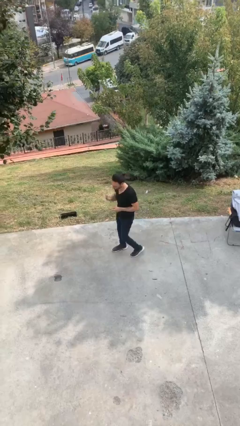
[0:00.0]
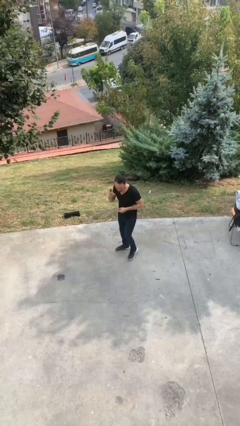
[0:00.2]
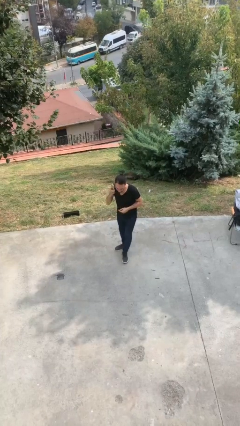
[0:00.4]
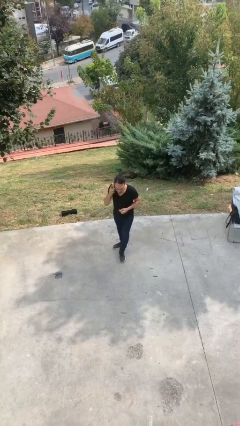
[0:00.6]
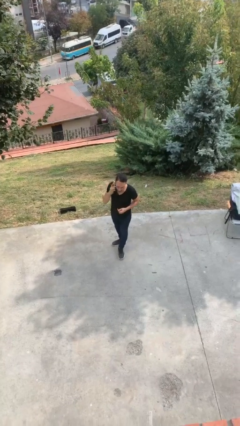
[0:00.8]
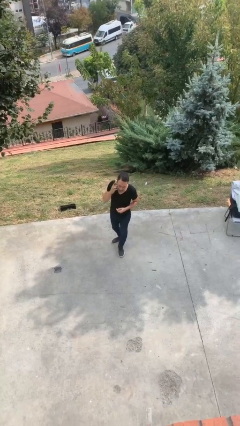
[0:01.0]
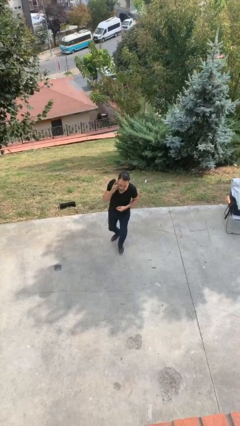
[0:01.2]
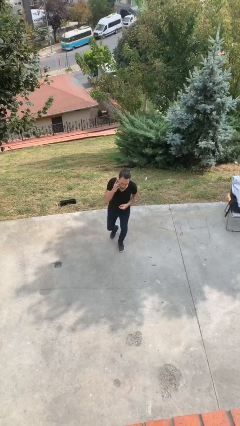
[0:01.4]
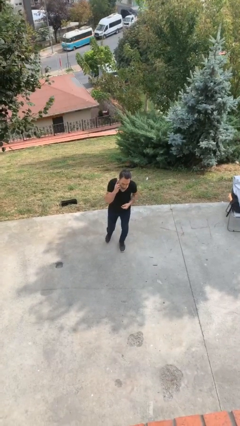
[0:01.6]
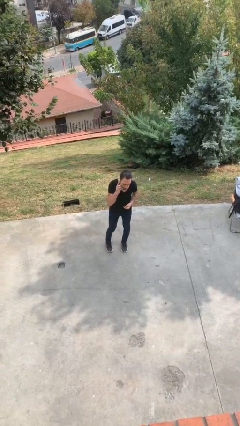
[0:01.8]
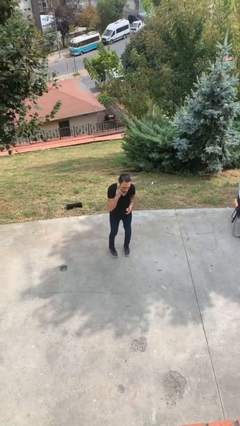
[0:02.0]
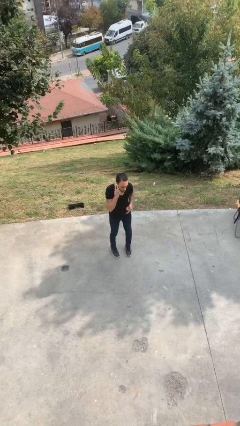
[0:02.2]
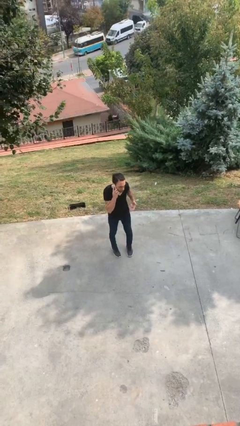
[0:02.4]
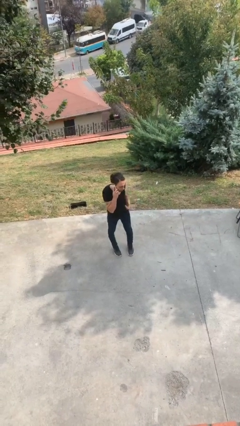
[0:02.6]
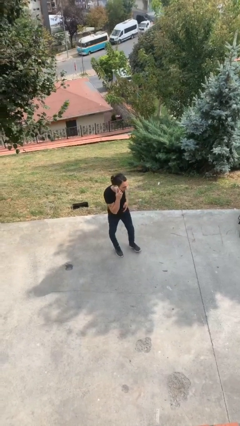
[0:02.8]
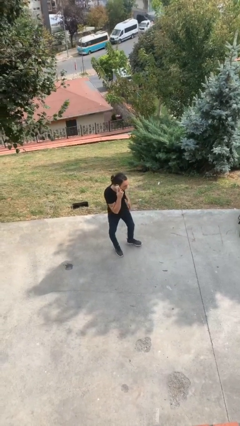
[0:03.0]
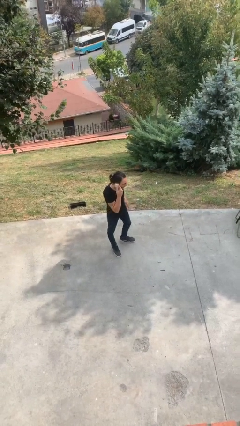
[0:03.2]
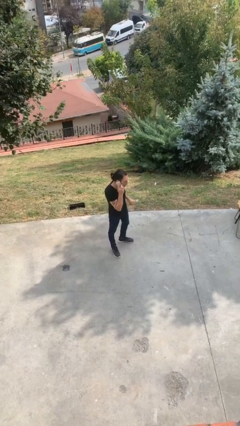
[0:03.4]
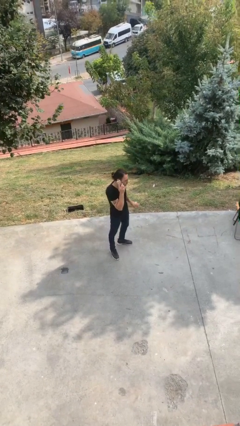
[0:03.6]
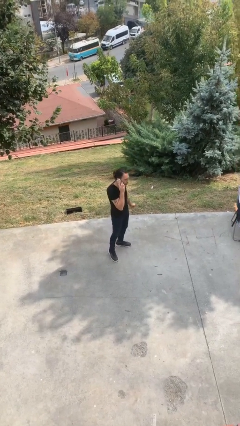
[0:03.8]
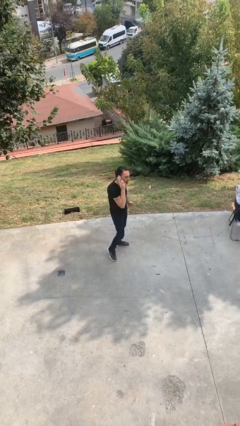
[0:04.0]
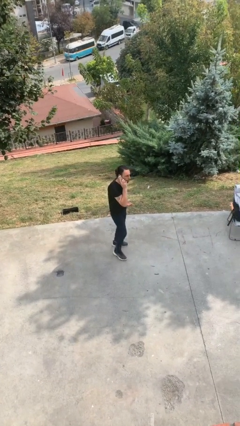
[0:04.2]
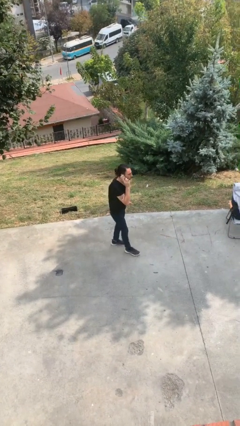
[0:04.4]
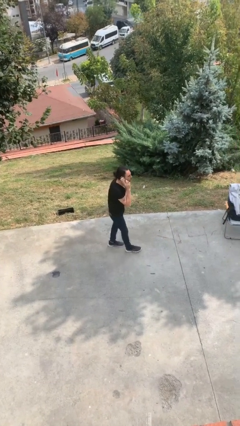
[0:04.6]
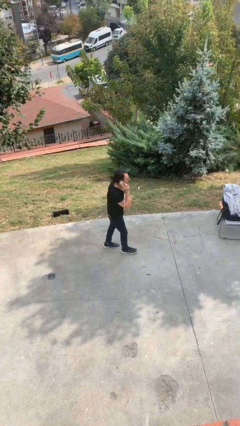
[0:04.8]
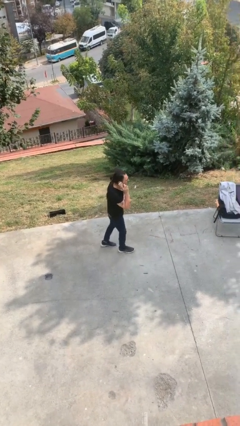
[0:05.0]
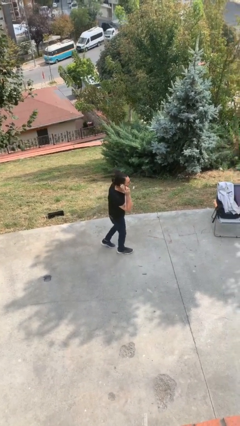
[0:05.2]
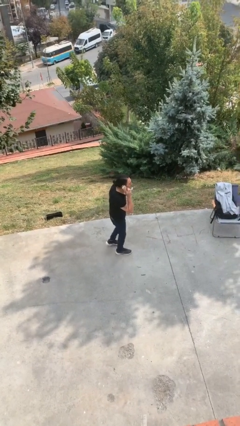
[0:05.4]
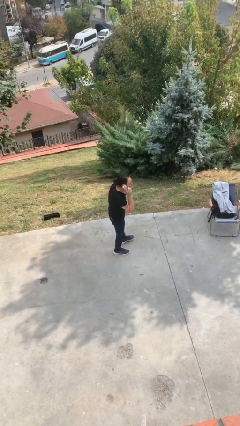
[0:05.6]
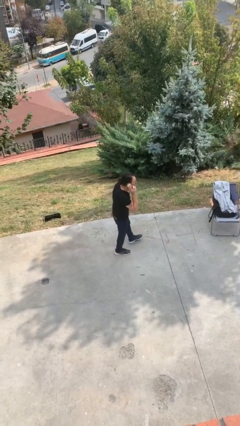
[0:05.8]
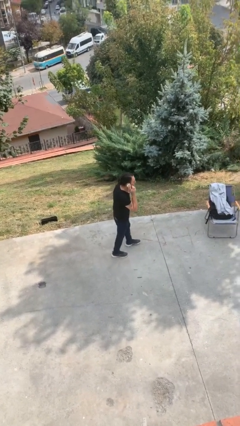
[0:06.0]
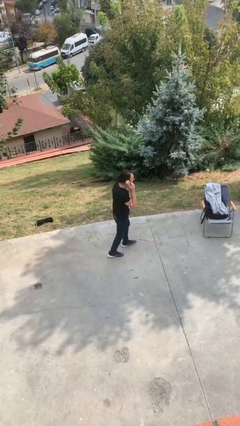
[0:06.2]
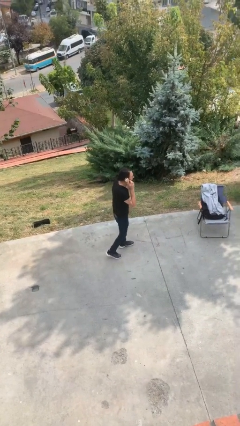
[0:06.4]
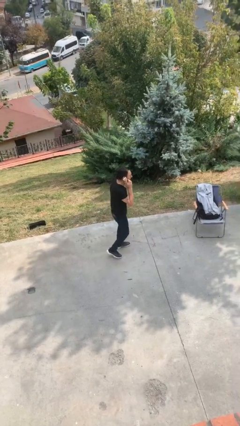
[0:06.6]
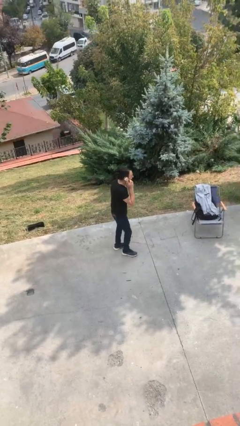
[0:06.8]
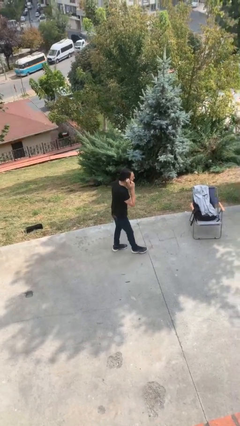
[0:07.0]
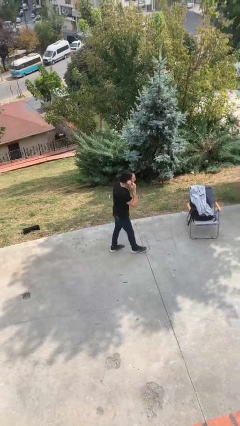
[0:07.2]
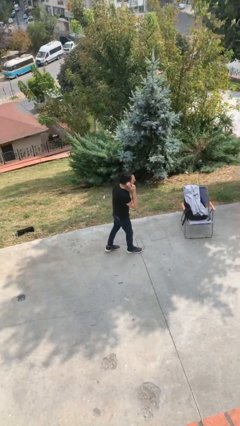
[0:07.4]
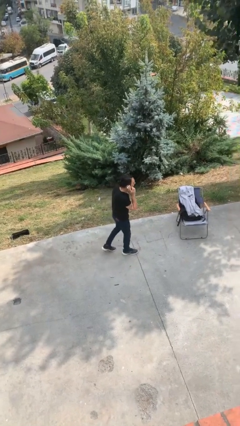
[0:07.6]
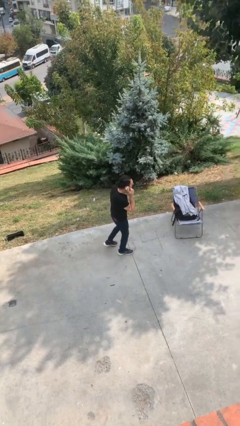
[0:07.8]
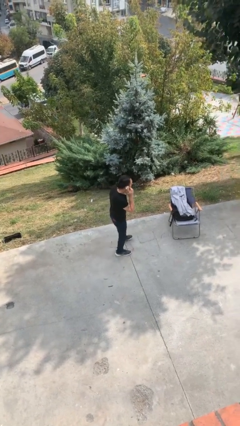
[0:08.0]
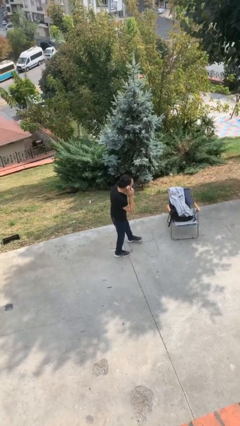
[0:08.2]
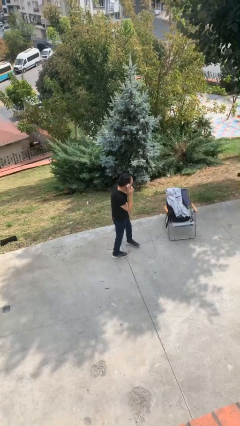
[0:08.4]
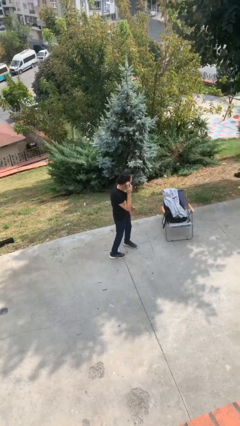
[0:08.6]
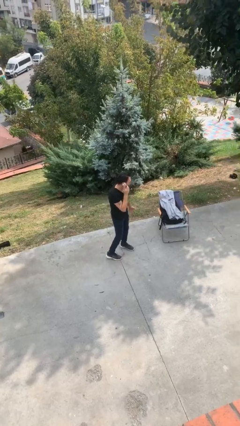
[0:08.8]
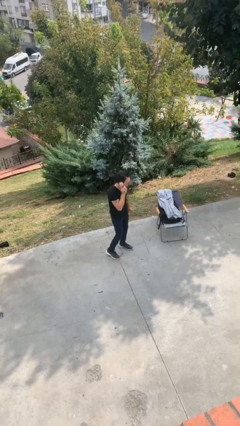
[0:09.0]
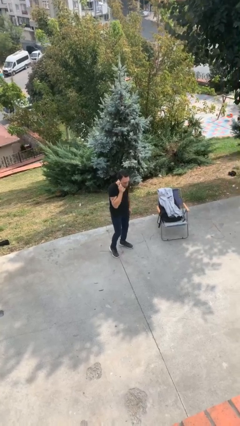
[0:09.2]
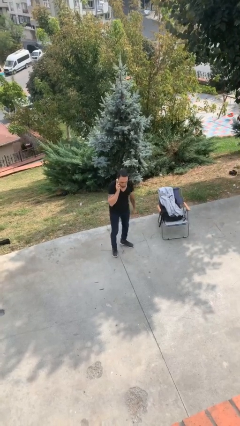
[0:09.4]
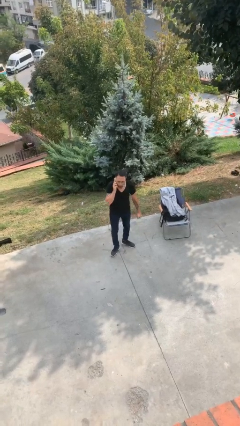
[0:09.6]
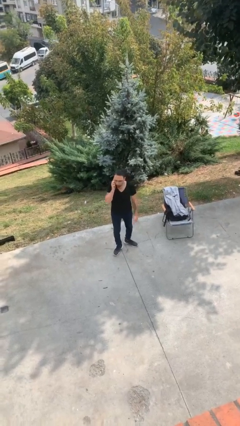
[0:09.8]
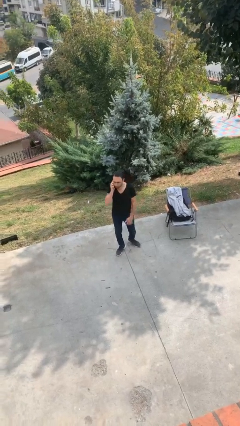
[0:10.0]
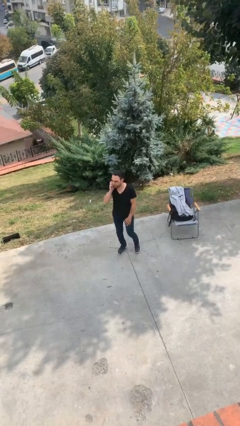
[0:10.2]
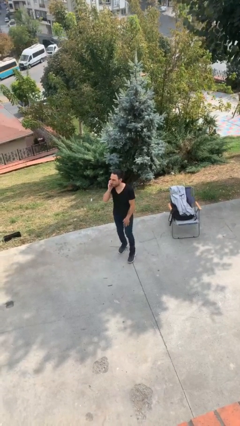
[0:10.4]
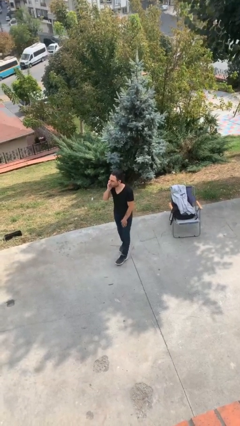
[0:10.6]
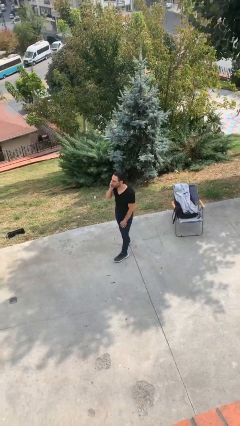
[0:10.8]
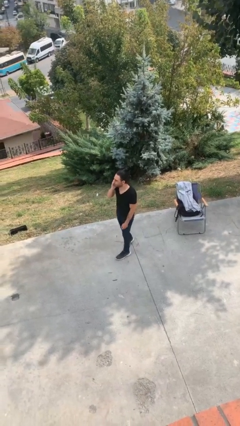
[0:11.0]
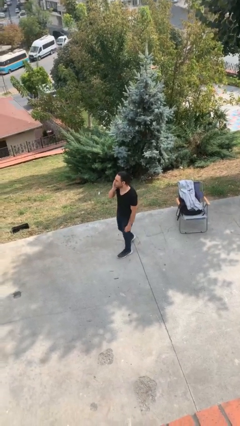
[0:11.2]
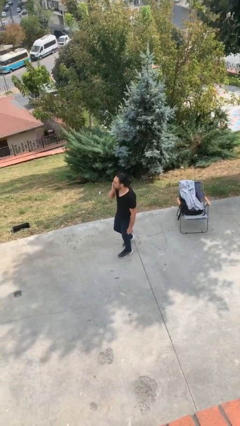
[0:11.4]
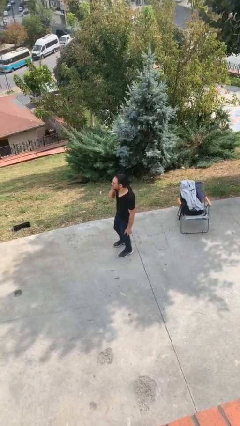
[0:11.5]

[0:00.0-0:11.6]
person talks on phone

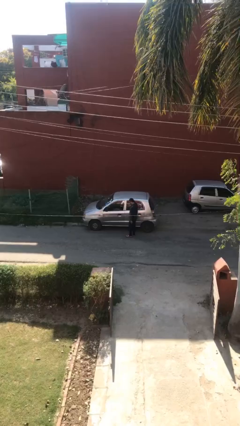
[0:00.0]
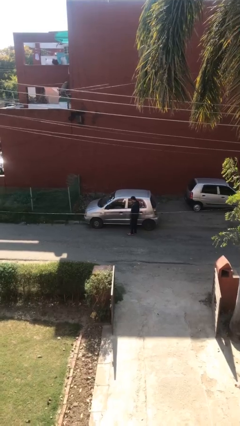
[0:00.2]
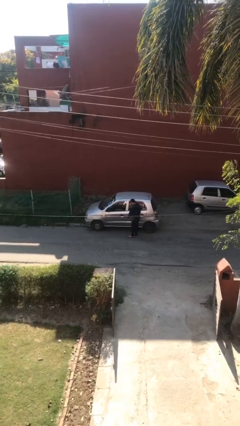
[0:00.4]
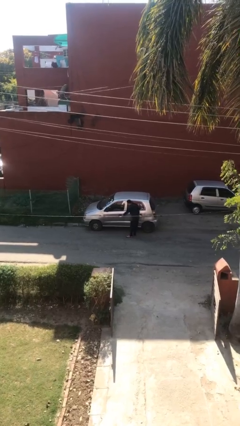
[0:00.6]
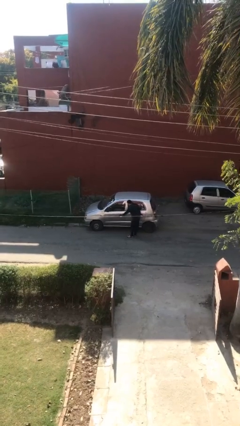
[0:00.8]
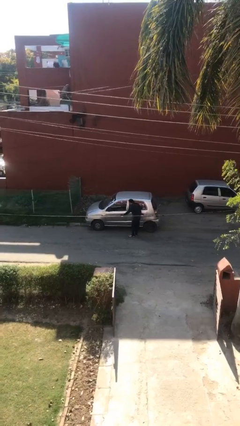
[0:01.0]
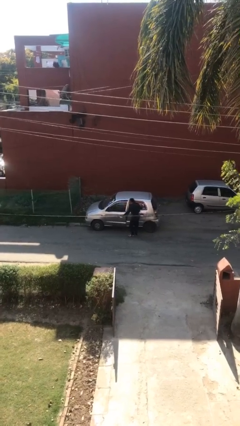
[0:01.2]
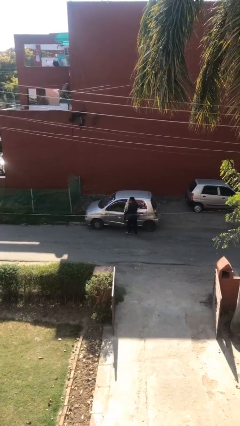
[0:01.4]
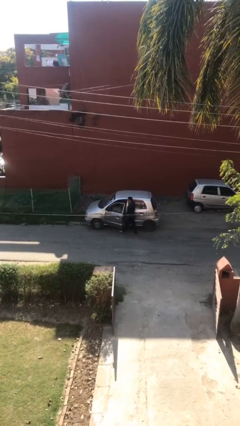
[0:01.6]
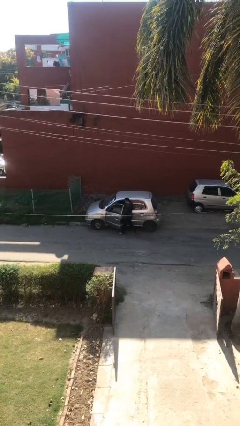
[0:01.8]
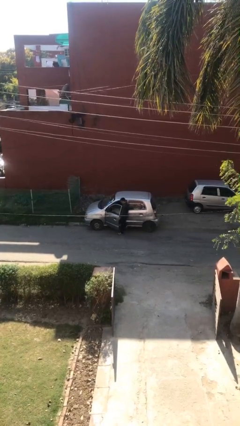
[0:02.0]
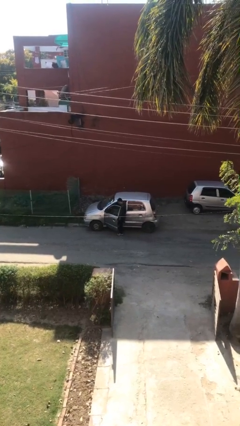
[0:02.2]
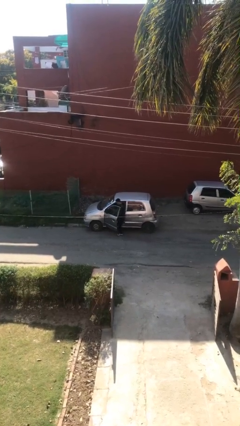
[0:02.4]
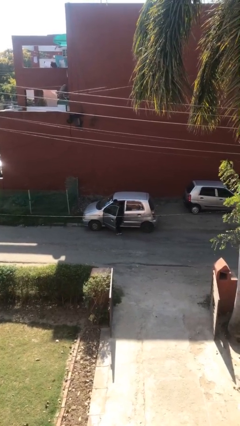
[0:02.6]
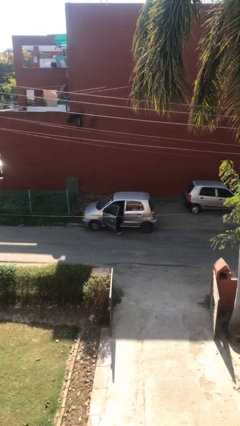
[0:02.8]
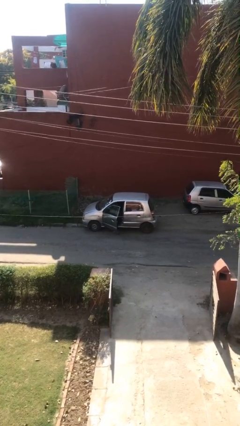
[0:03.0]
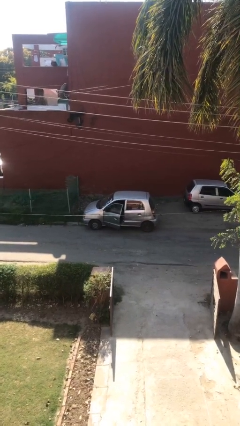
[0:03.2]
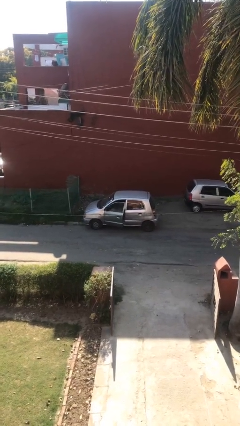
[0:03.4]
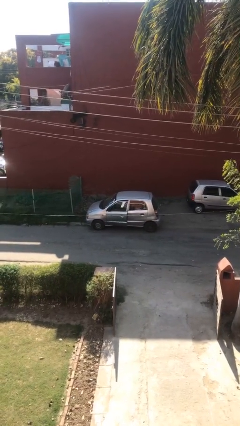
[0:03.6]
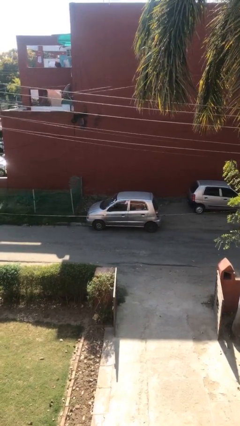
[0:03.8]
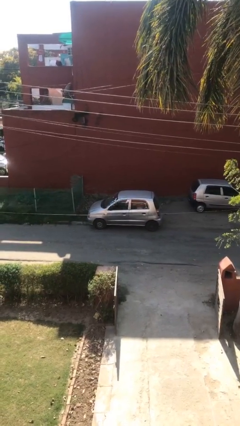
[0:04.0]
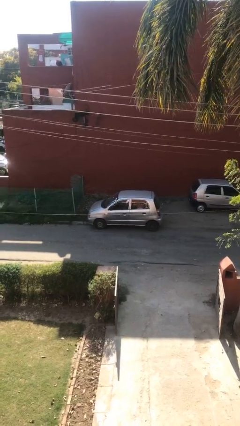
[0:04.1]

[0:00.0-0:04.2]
car picks up person

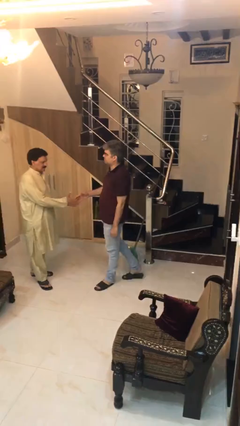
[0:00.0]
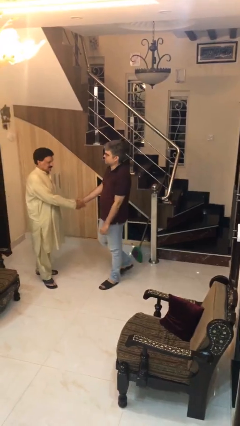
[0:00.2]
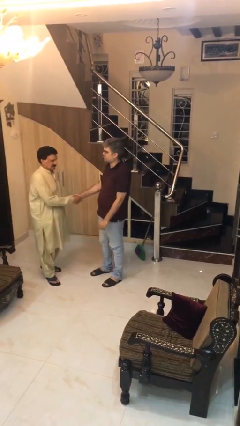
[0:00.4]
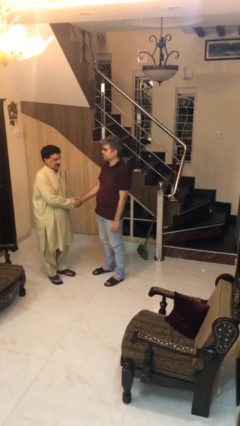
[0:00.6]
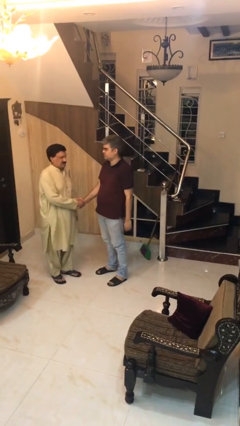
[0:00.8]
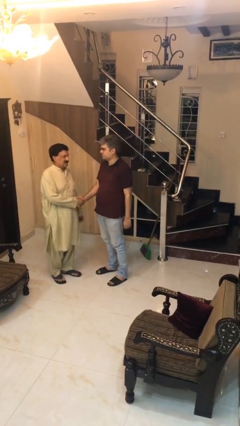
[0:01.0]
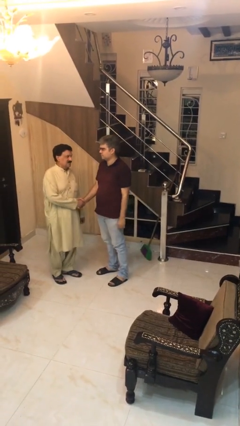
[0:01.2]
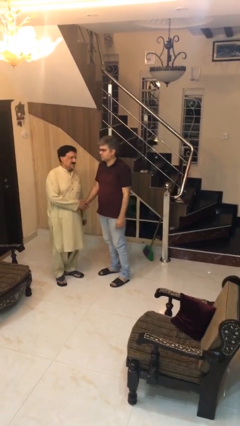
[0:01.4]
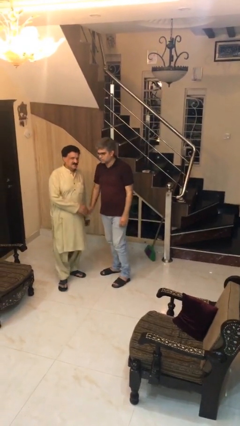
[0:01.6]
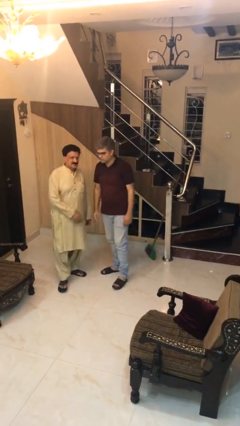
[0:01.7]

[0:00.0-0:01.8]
person shakes hand

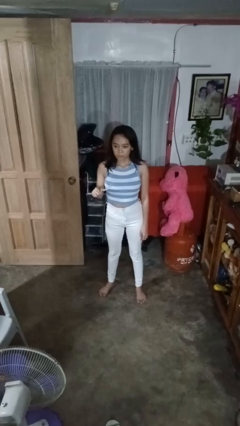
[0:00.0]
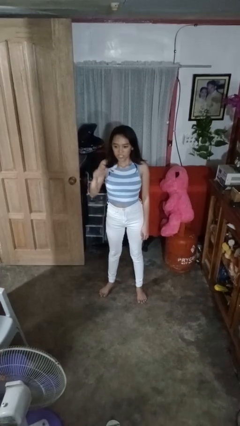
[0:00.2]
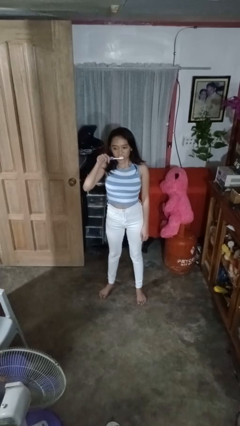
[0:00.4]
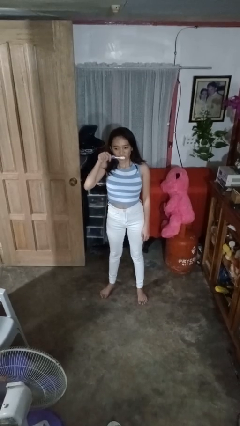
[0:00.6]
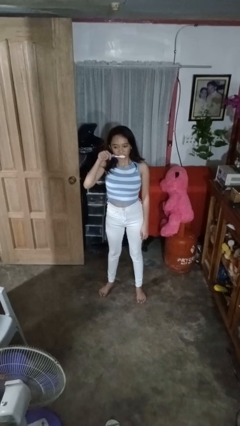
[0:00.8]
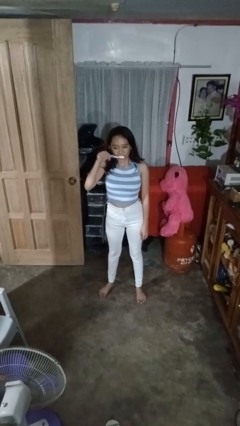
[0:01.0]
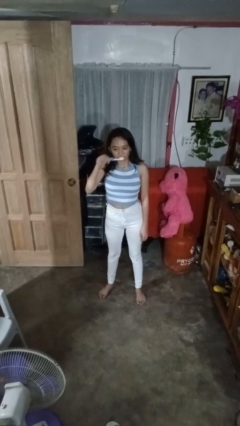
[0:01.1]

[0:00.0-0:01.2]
person brushes teeth
